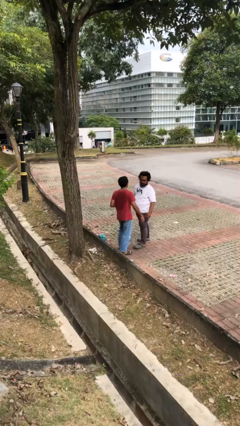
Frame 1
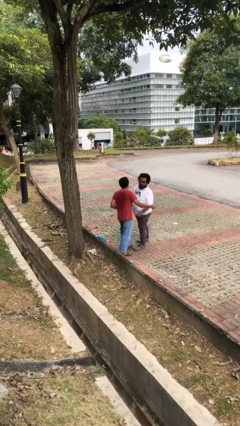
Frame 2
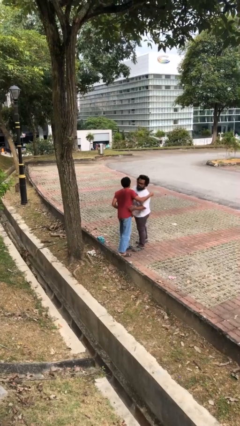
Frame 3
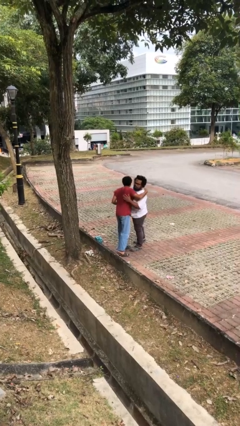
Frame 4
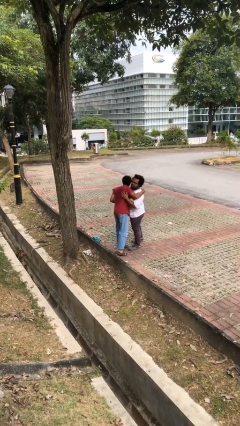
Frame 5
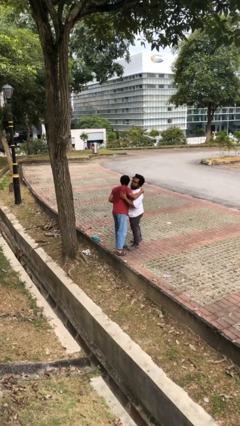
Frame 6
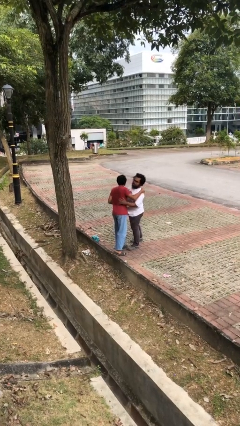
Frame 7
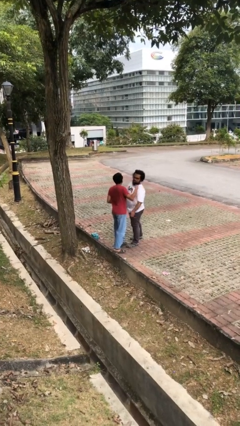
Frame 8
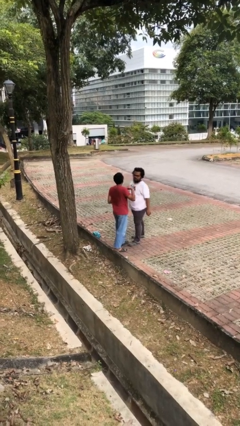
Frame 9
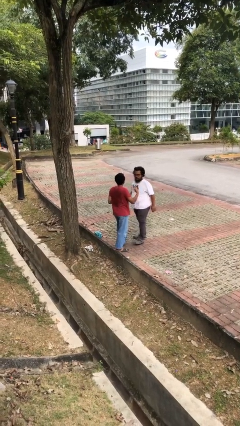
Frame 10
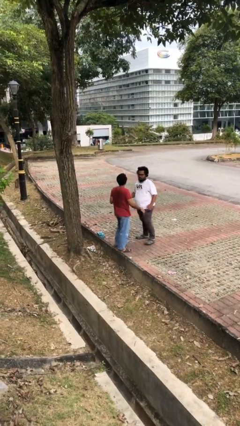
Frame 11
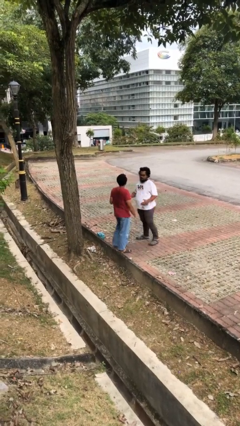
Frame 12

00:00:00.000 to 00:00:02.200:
person embraces person

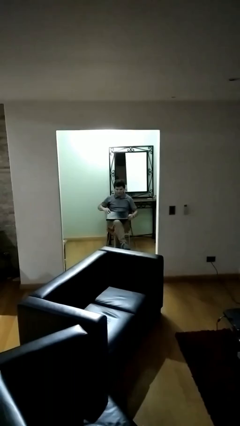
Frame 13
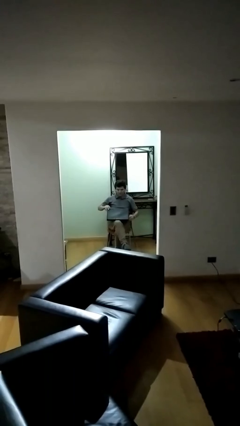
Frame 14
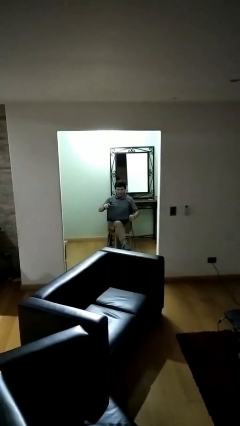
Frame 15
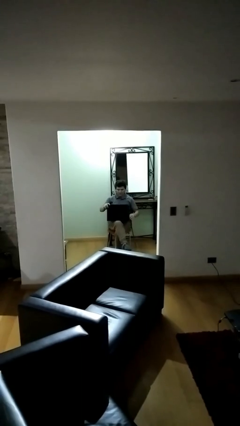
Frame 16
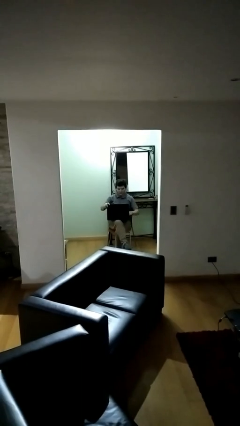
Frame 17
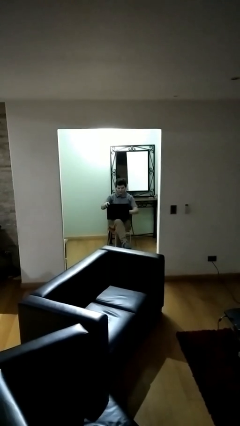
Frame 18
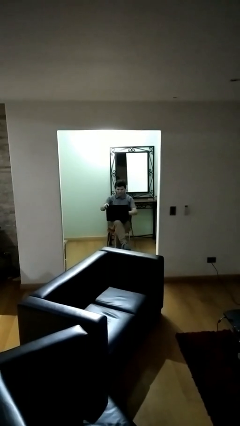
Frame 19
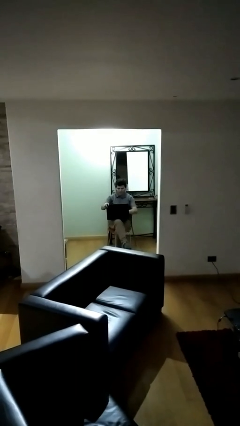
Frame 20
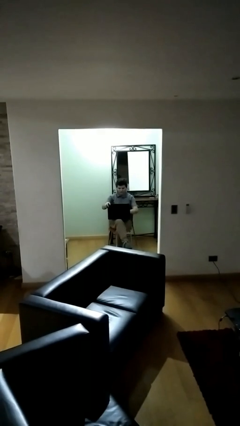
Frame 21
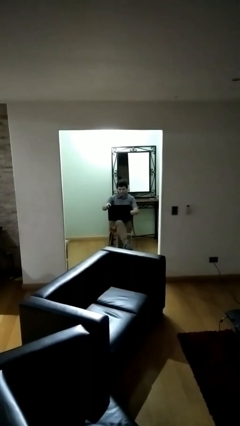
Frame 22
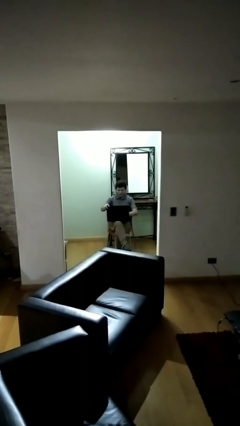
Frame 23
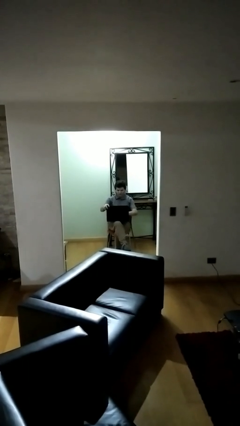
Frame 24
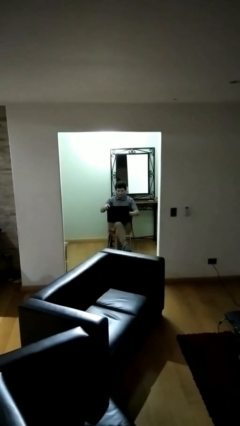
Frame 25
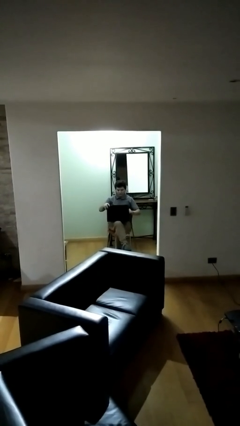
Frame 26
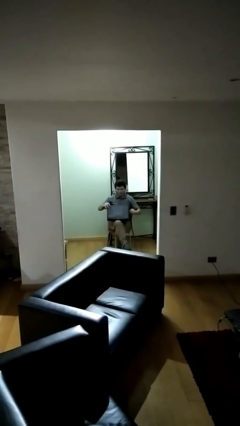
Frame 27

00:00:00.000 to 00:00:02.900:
person interacts with laptop

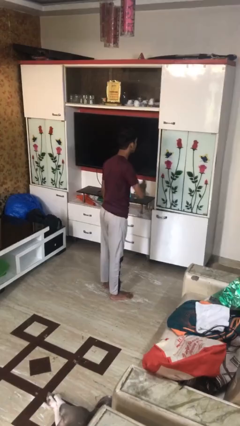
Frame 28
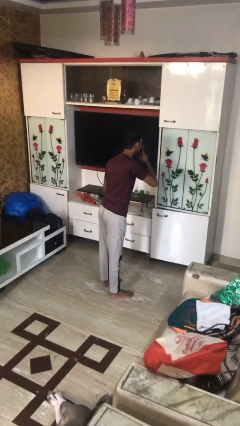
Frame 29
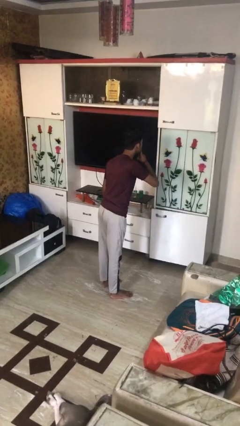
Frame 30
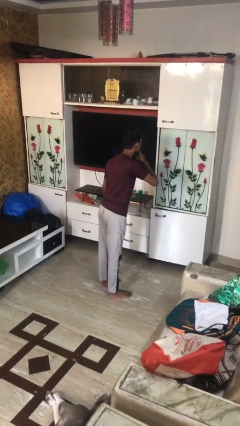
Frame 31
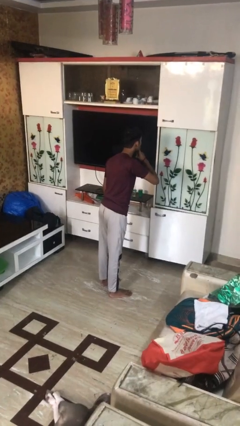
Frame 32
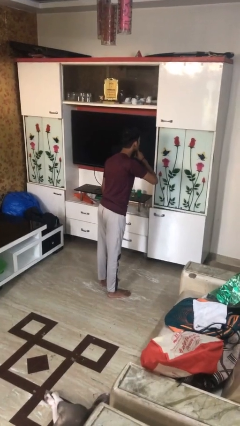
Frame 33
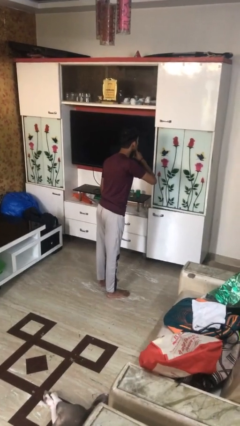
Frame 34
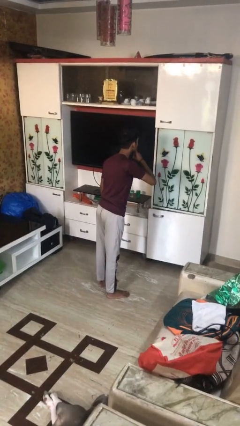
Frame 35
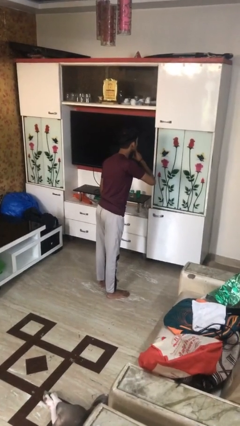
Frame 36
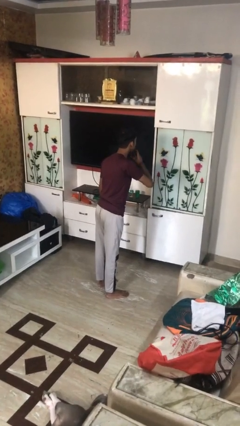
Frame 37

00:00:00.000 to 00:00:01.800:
person gestures be quiet

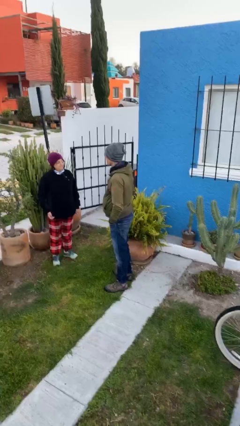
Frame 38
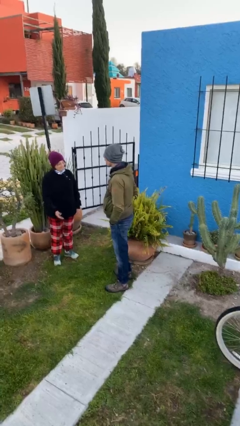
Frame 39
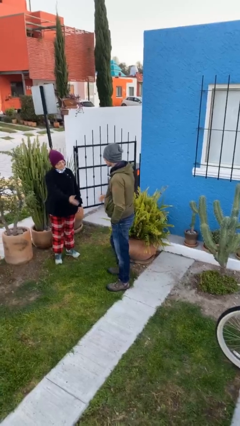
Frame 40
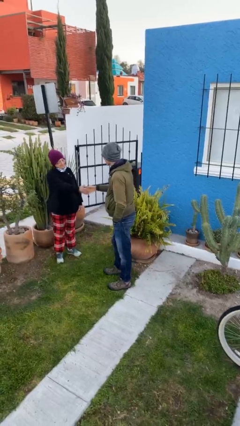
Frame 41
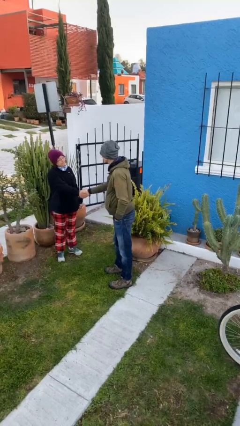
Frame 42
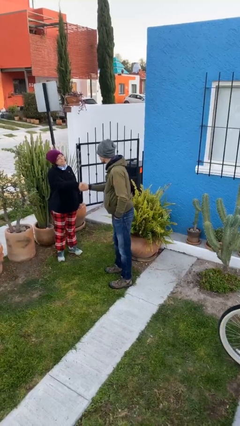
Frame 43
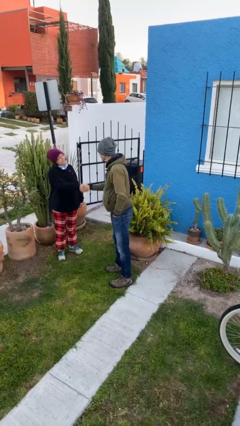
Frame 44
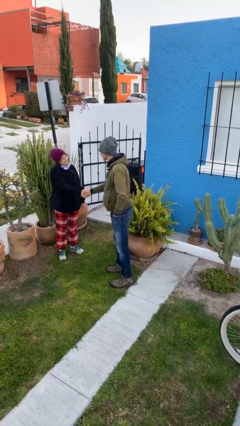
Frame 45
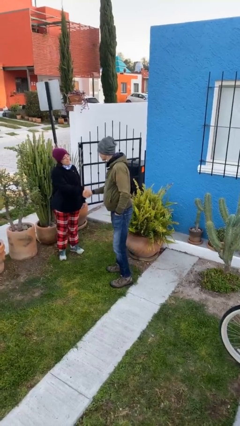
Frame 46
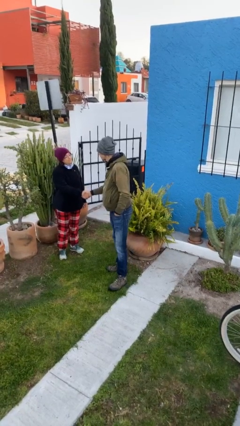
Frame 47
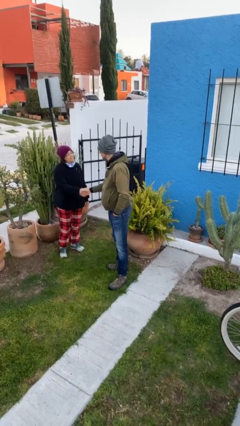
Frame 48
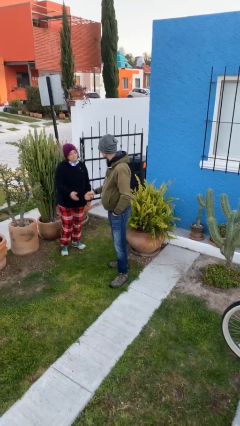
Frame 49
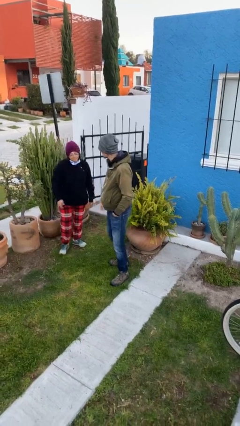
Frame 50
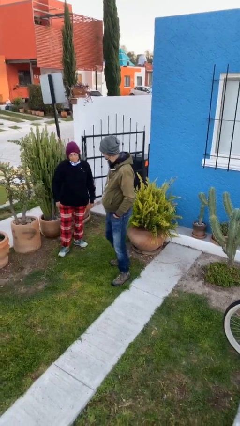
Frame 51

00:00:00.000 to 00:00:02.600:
person shakes hand

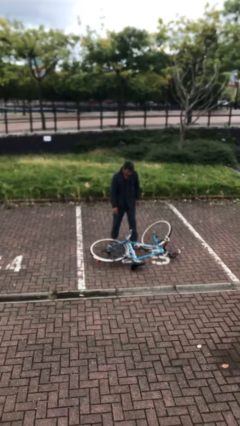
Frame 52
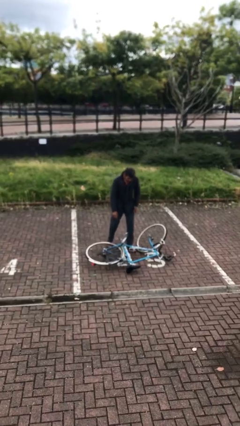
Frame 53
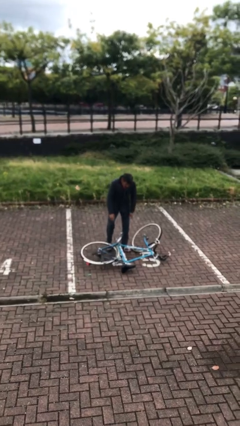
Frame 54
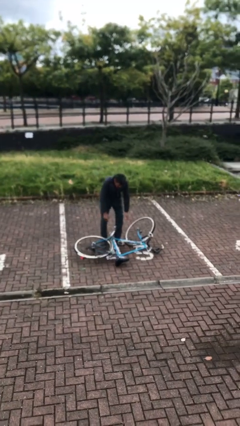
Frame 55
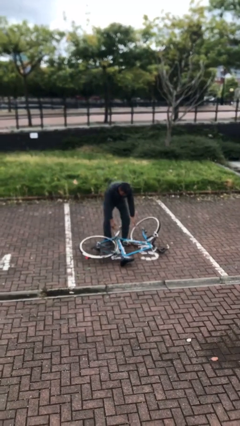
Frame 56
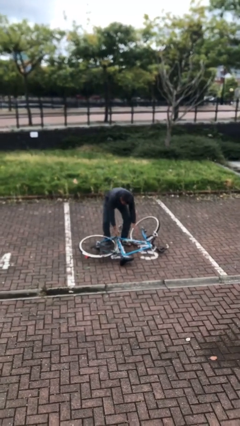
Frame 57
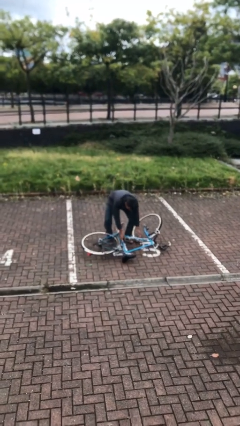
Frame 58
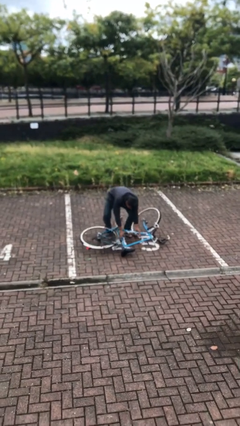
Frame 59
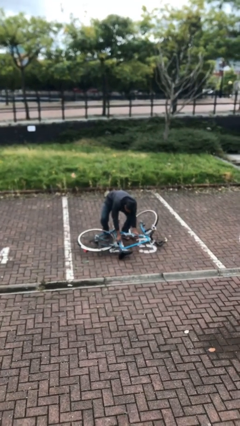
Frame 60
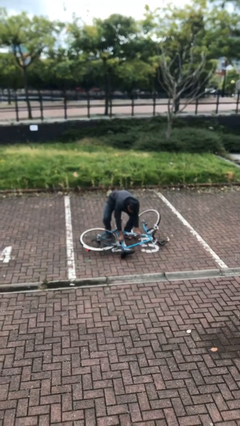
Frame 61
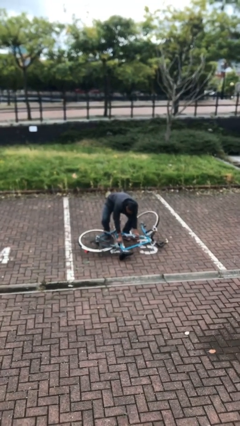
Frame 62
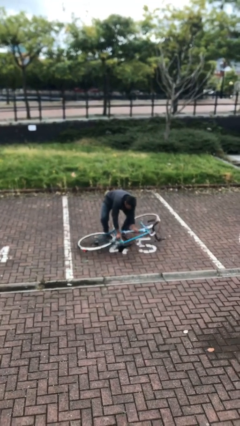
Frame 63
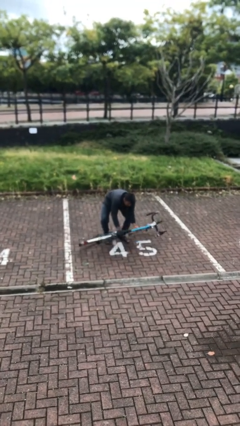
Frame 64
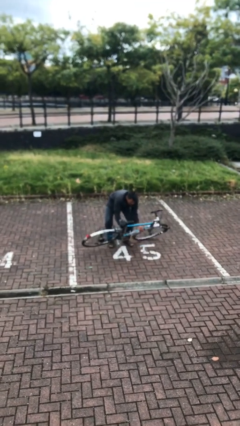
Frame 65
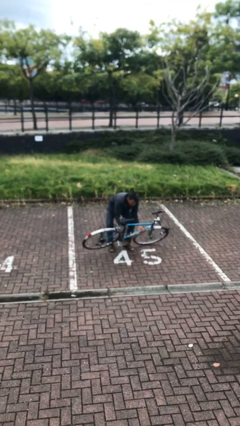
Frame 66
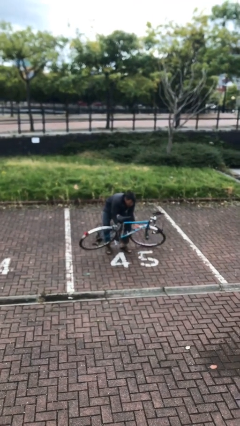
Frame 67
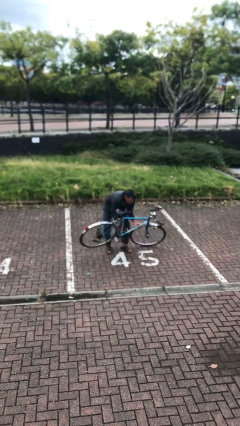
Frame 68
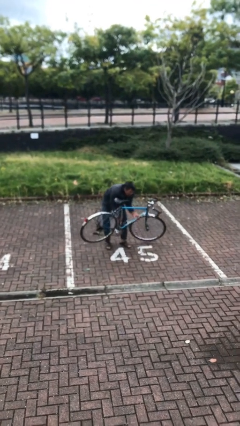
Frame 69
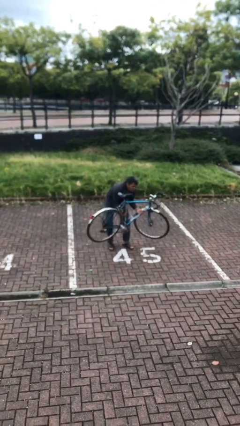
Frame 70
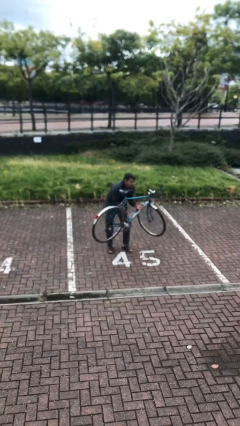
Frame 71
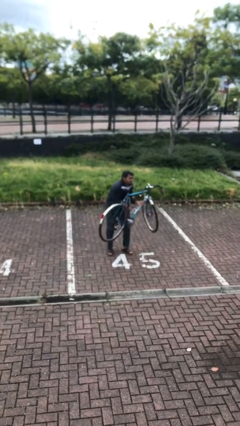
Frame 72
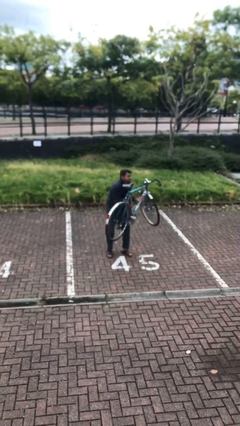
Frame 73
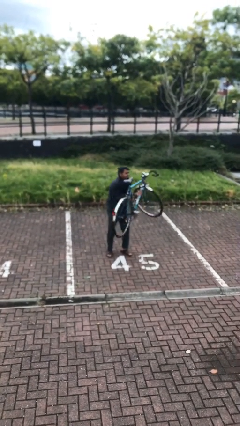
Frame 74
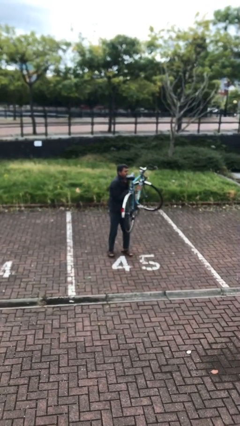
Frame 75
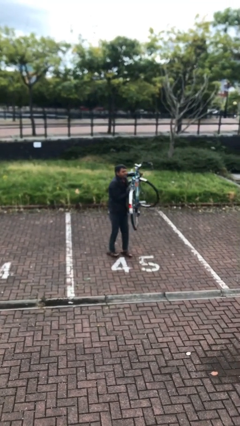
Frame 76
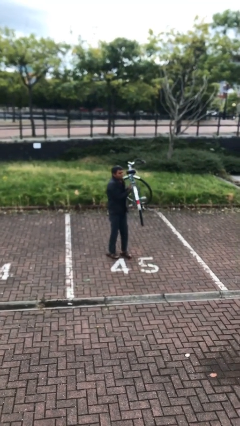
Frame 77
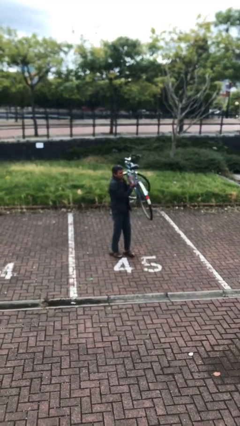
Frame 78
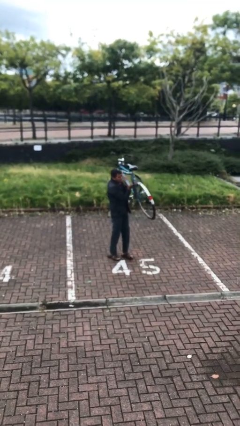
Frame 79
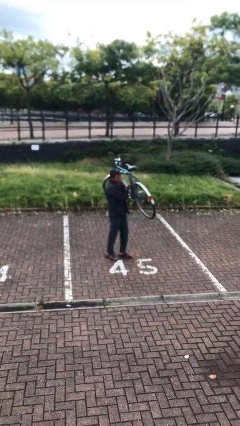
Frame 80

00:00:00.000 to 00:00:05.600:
person picks up object from floor

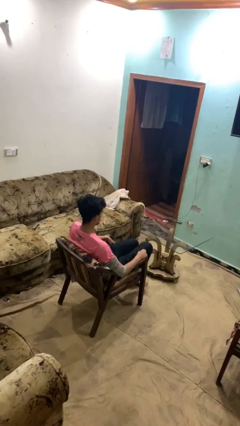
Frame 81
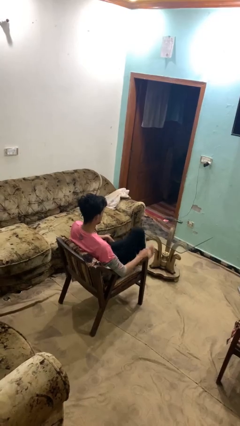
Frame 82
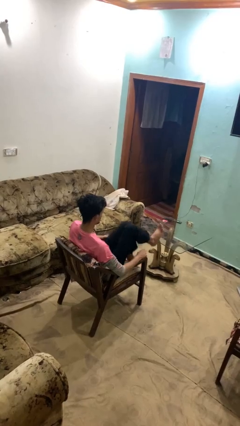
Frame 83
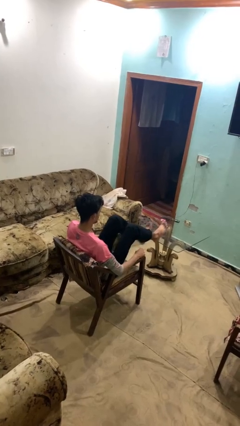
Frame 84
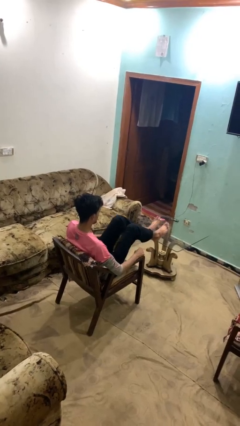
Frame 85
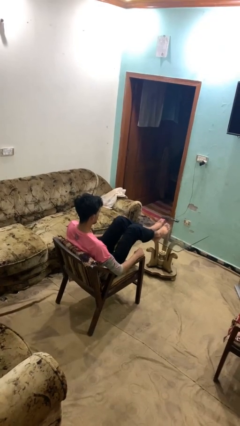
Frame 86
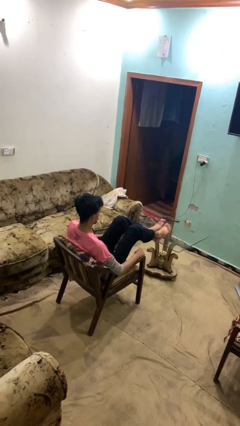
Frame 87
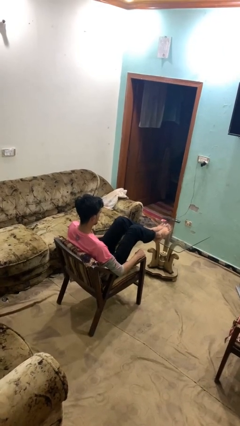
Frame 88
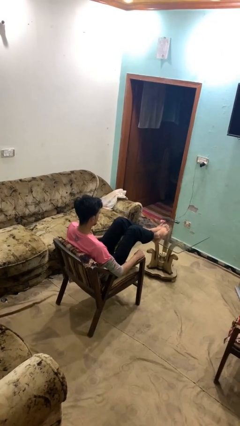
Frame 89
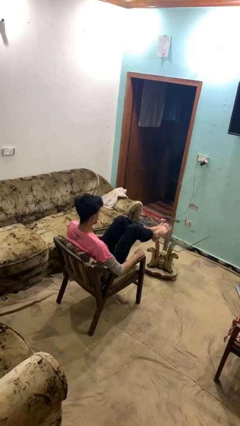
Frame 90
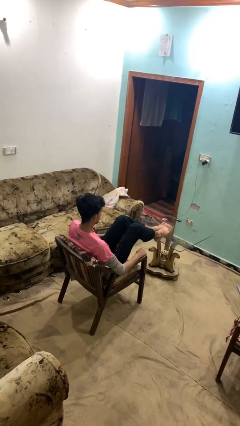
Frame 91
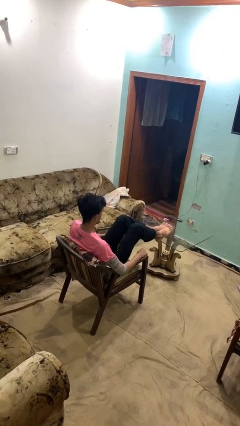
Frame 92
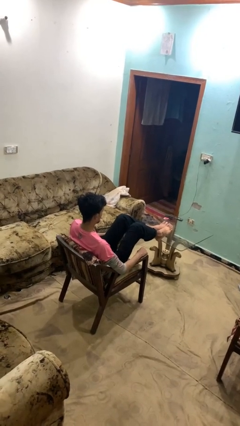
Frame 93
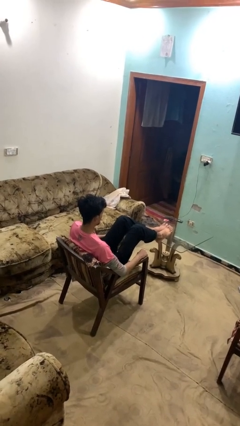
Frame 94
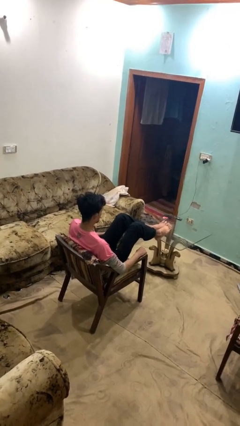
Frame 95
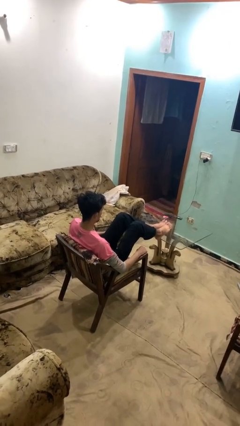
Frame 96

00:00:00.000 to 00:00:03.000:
person puts feet up
